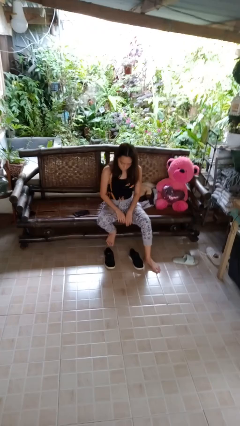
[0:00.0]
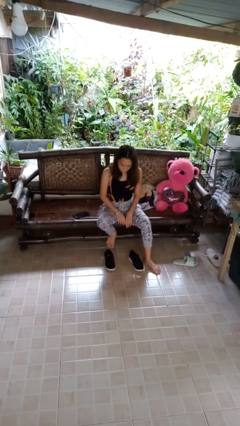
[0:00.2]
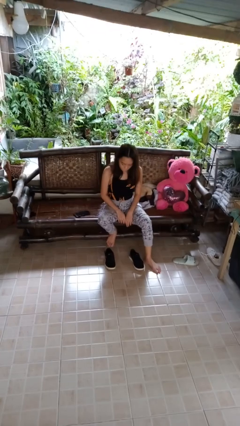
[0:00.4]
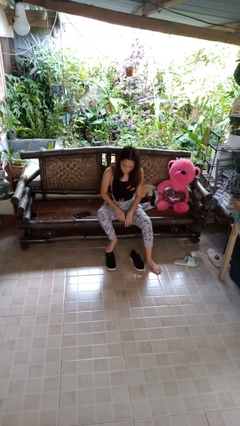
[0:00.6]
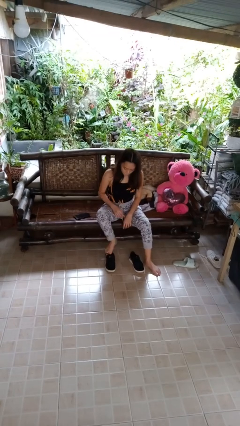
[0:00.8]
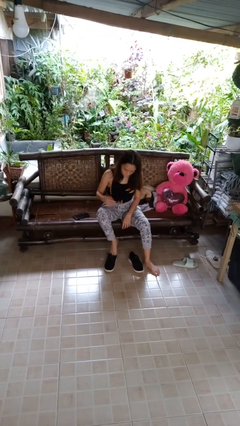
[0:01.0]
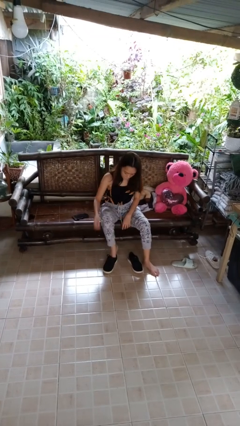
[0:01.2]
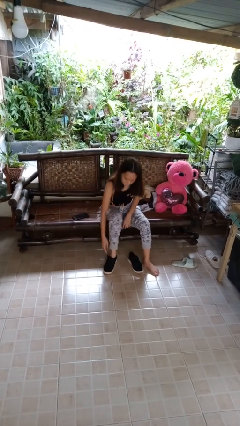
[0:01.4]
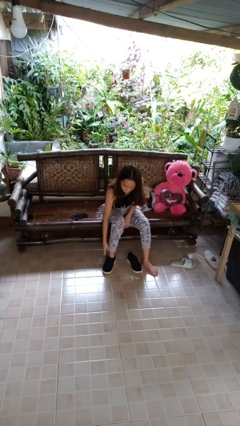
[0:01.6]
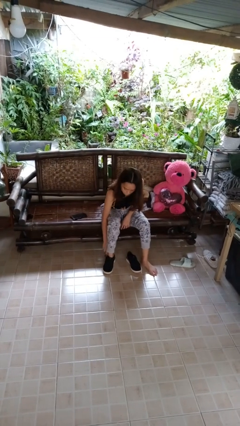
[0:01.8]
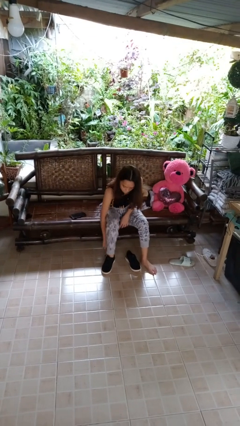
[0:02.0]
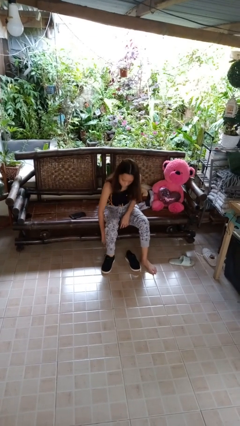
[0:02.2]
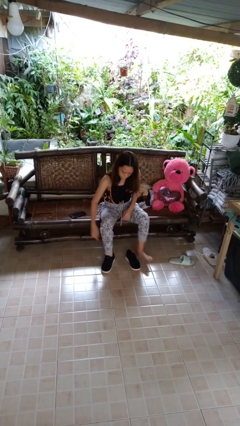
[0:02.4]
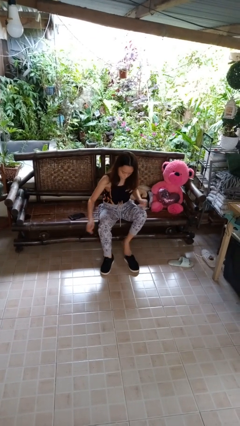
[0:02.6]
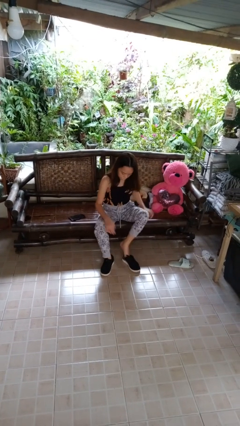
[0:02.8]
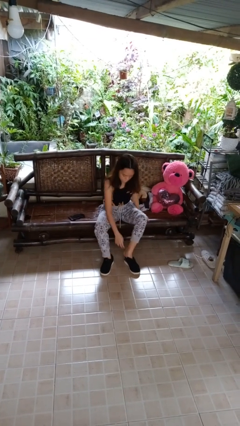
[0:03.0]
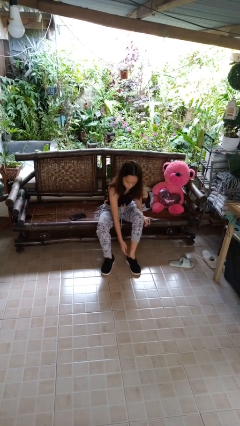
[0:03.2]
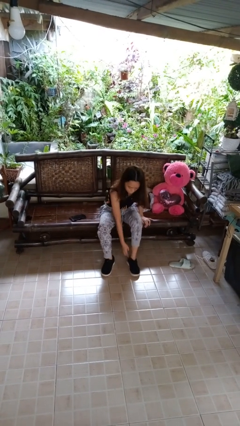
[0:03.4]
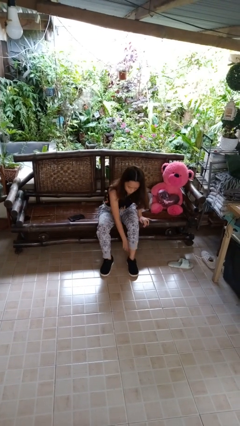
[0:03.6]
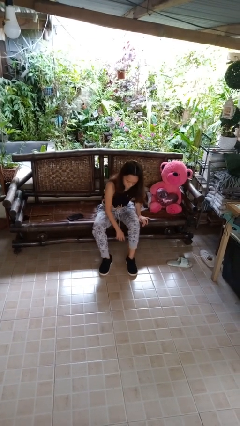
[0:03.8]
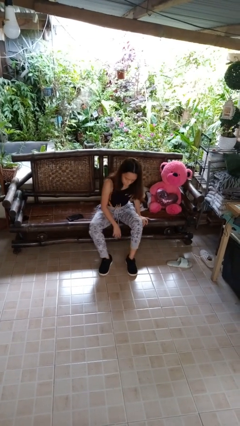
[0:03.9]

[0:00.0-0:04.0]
person puts on shoes

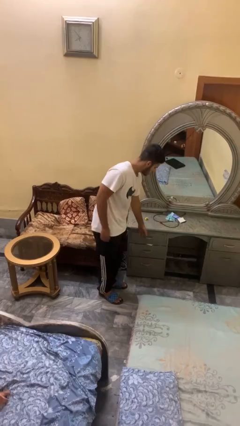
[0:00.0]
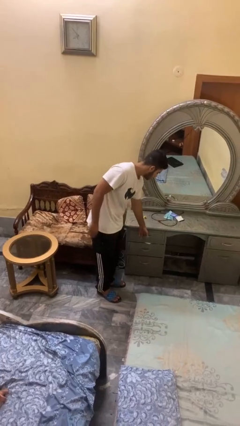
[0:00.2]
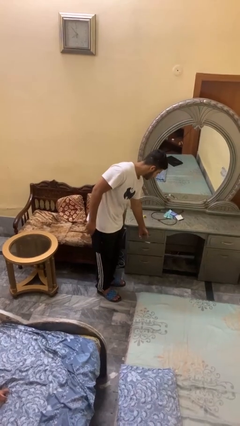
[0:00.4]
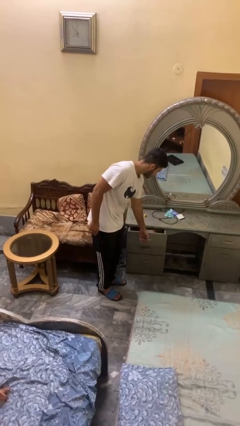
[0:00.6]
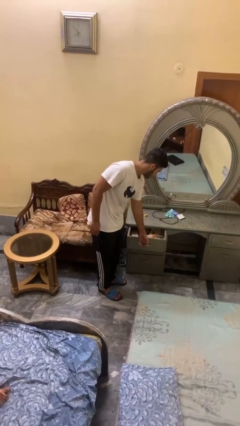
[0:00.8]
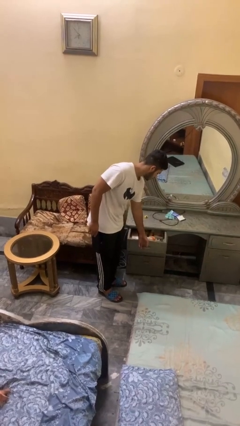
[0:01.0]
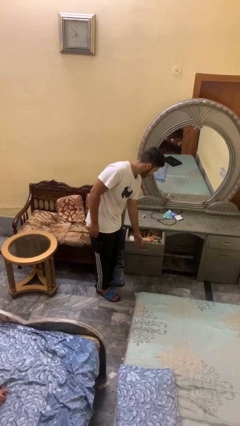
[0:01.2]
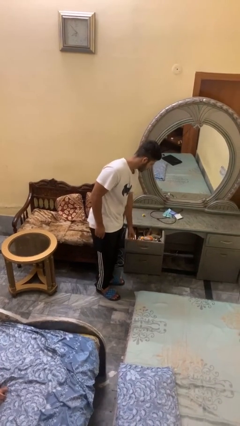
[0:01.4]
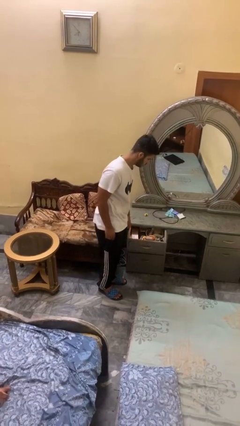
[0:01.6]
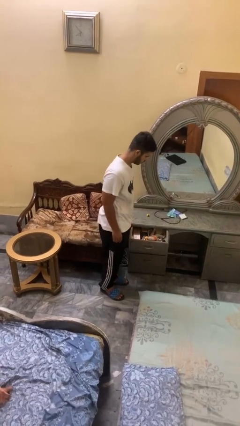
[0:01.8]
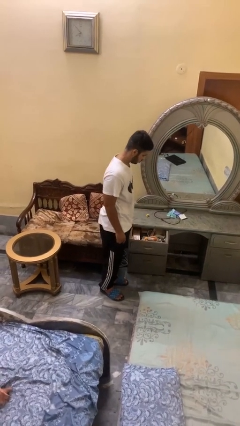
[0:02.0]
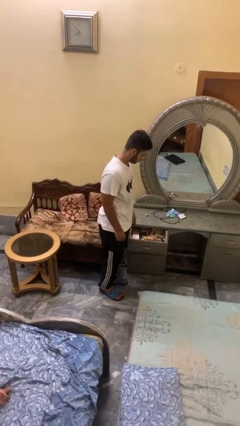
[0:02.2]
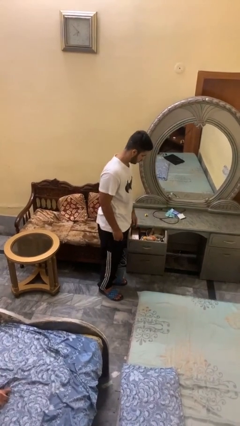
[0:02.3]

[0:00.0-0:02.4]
person opens dresser drawer

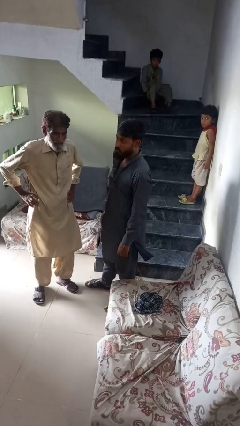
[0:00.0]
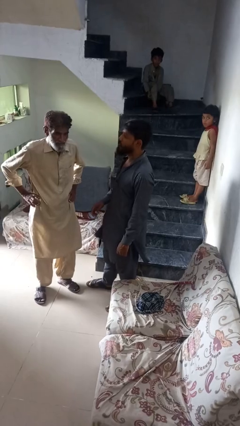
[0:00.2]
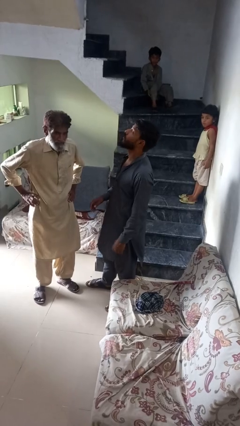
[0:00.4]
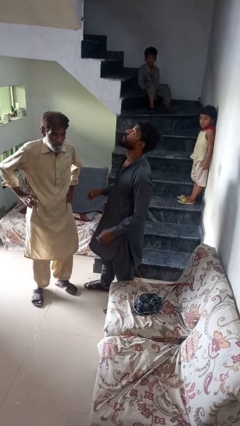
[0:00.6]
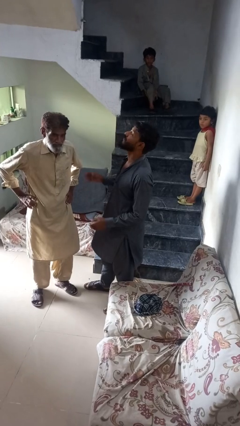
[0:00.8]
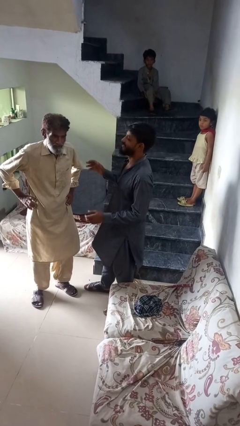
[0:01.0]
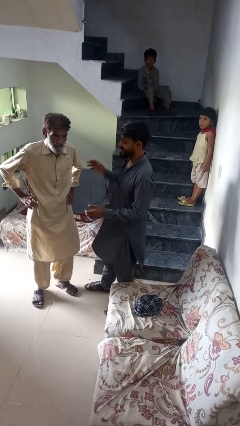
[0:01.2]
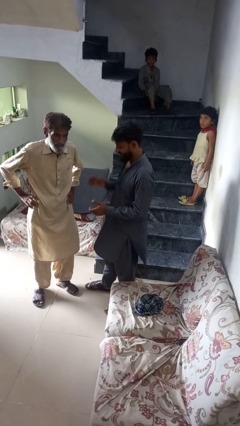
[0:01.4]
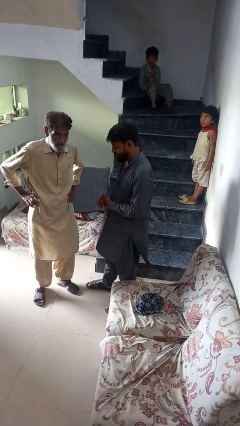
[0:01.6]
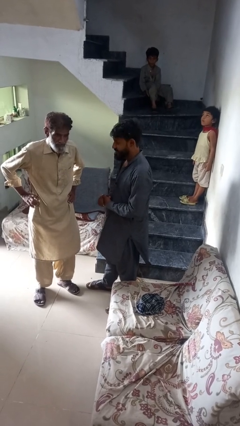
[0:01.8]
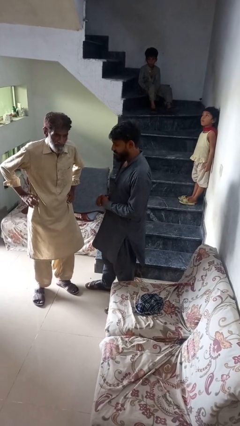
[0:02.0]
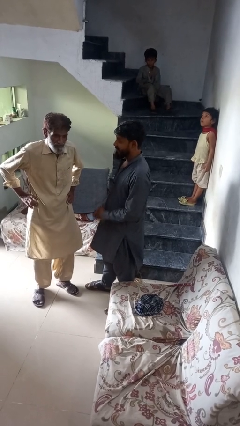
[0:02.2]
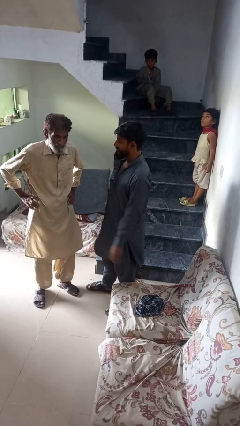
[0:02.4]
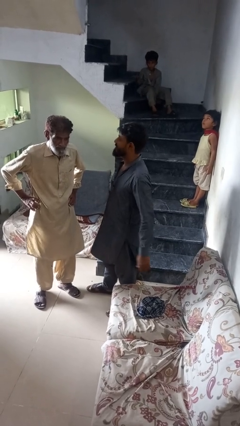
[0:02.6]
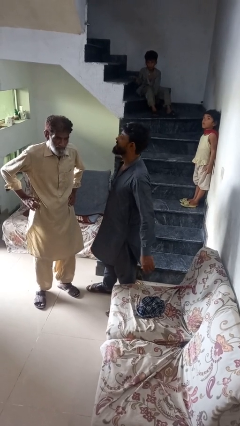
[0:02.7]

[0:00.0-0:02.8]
person laughs with person

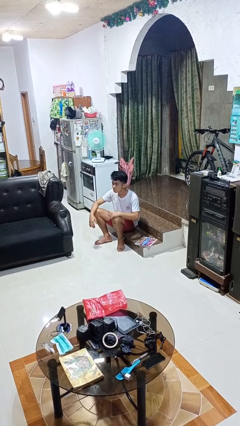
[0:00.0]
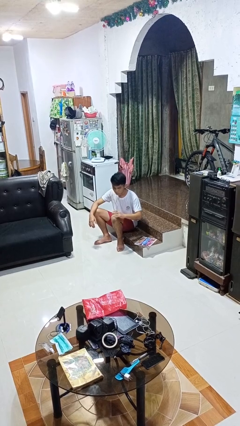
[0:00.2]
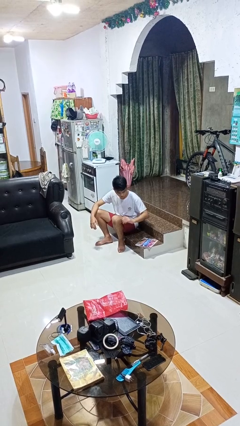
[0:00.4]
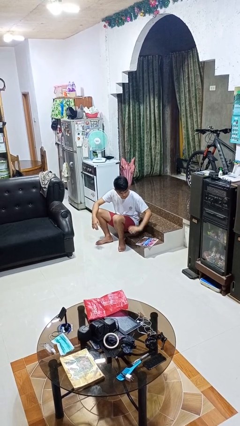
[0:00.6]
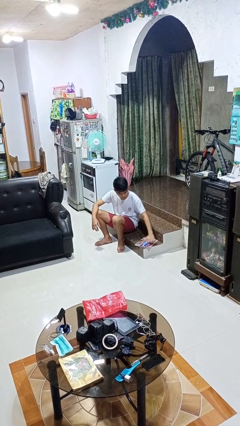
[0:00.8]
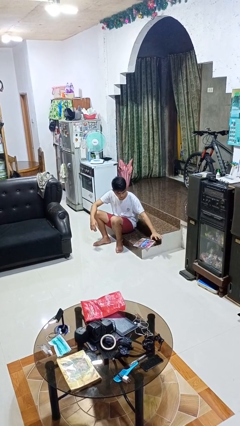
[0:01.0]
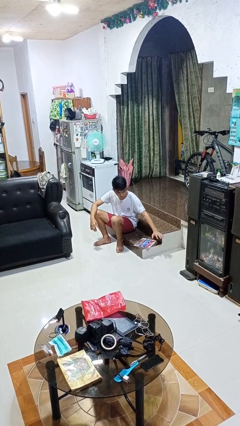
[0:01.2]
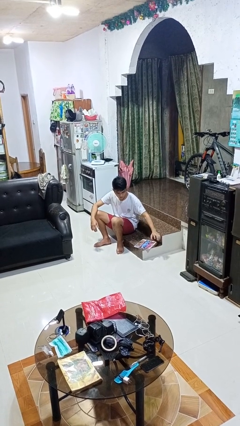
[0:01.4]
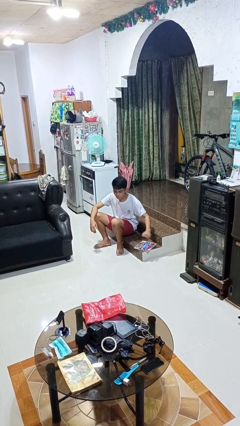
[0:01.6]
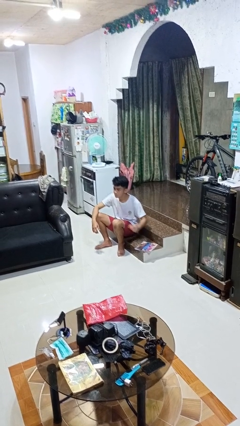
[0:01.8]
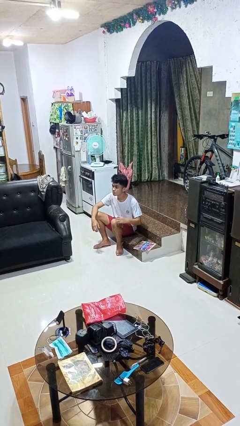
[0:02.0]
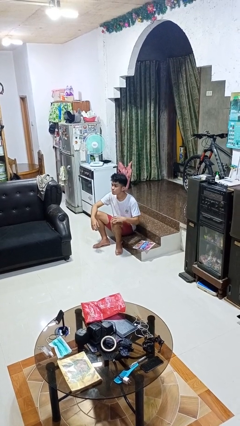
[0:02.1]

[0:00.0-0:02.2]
person waves hand over object

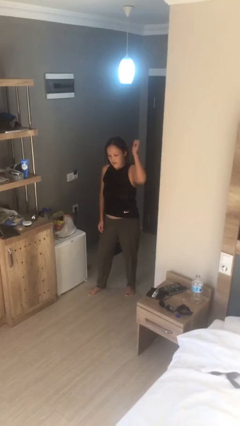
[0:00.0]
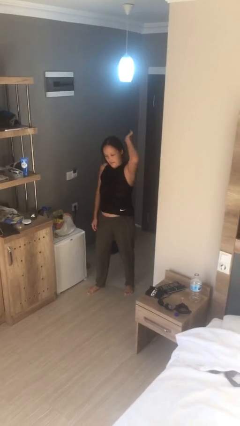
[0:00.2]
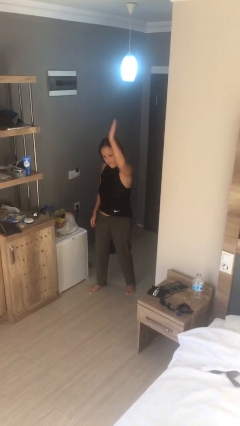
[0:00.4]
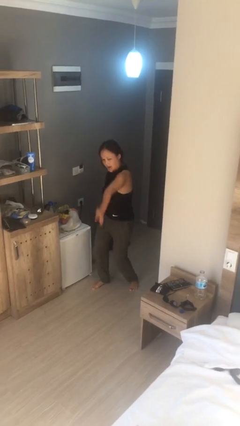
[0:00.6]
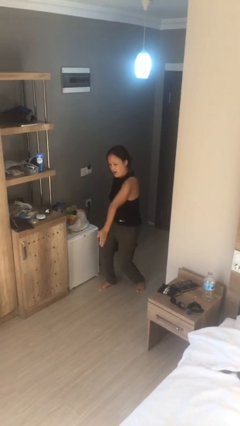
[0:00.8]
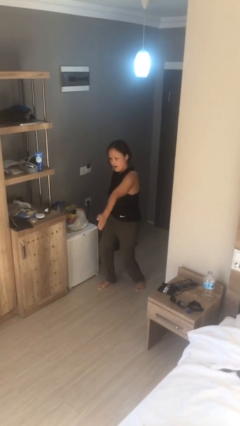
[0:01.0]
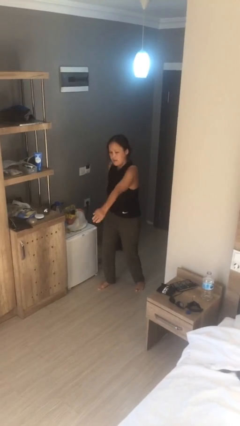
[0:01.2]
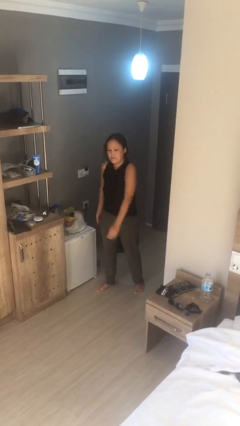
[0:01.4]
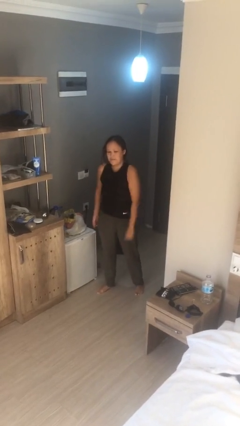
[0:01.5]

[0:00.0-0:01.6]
person karate chop

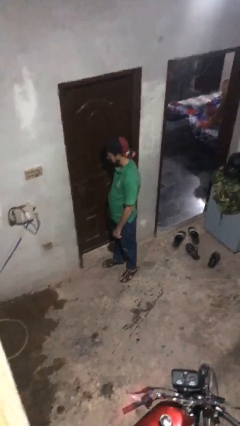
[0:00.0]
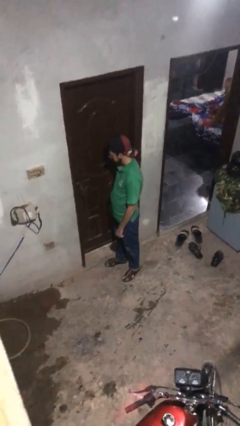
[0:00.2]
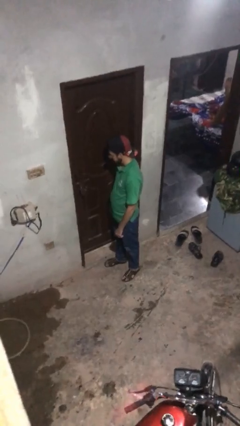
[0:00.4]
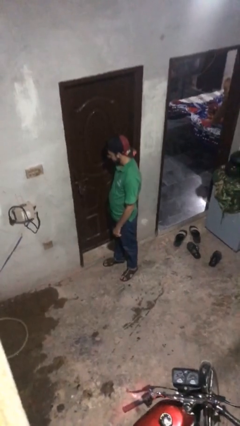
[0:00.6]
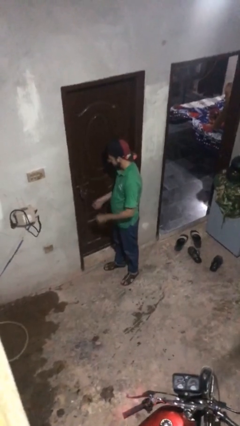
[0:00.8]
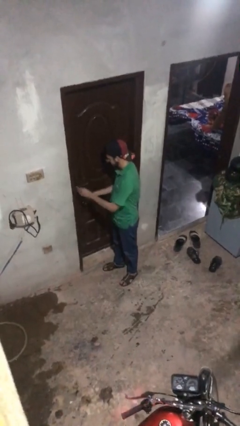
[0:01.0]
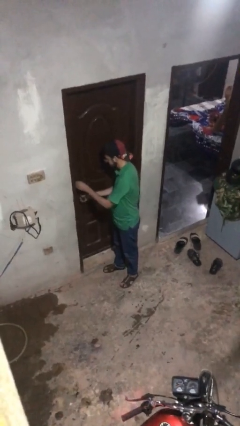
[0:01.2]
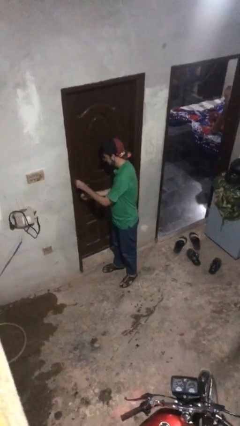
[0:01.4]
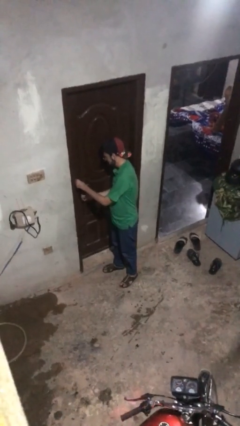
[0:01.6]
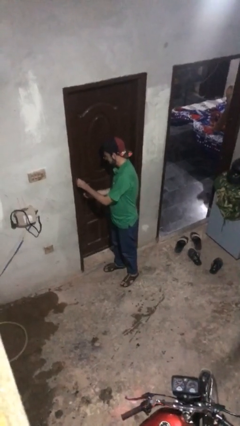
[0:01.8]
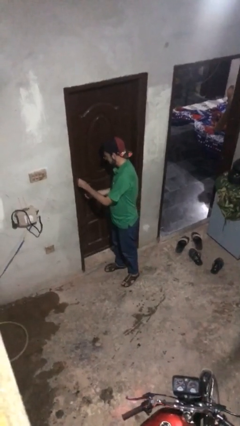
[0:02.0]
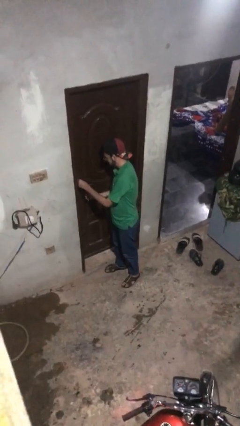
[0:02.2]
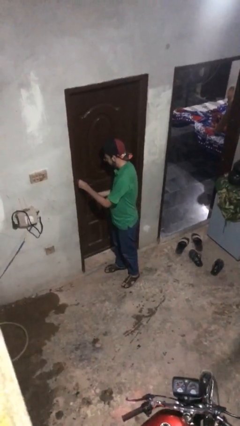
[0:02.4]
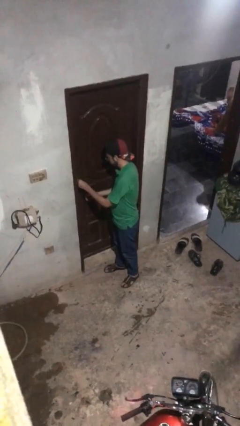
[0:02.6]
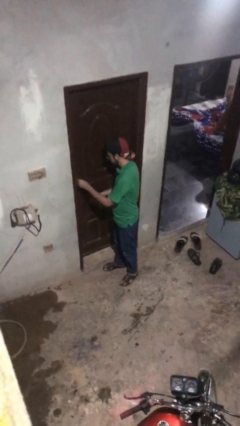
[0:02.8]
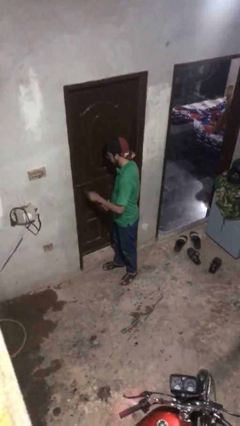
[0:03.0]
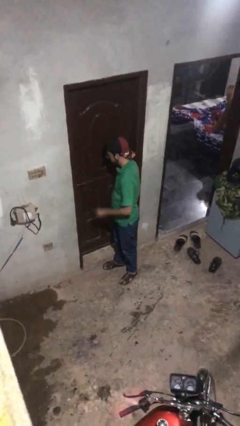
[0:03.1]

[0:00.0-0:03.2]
person unlocks door with keys

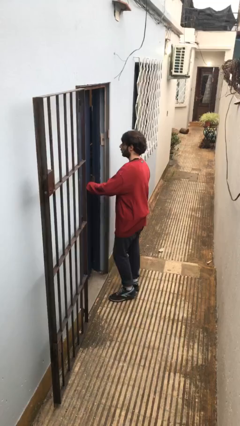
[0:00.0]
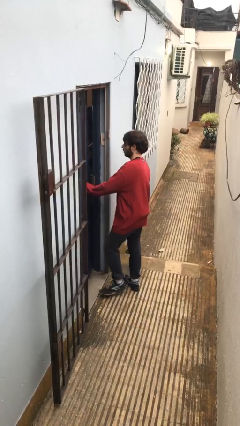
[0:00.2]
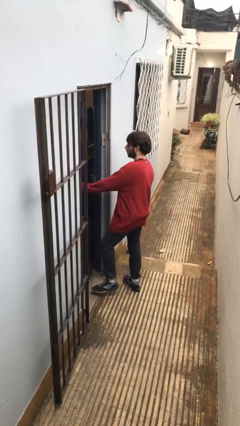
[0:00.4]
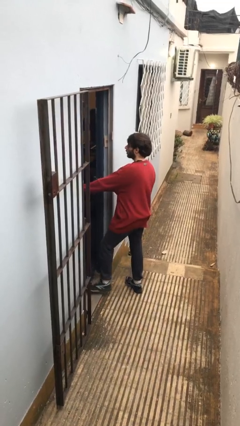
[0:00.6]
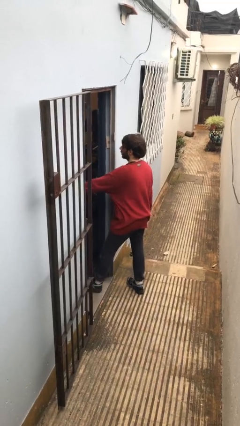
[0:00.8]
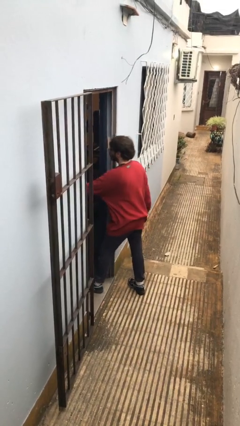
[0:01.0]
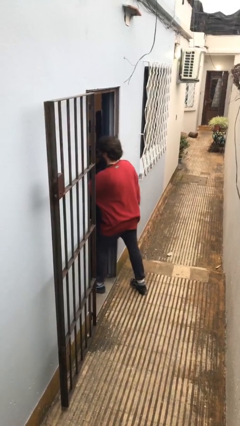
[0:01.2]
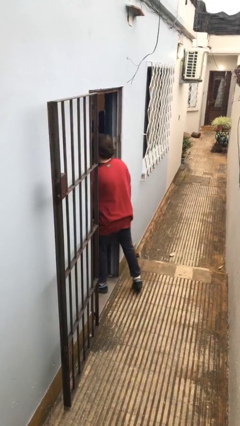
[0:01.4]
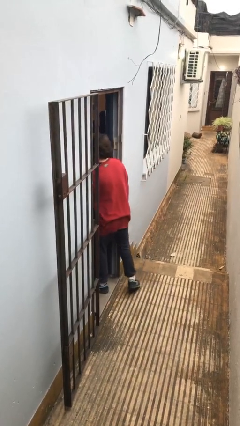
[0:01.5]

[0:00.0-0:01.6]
person opens facility door
